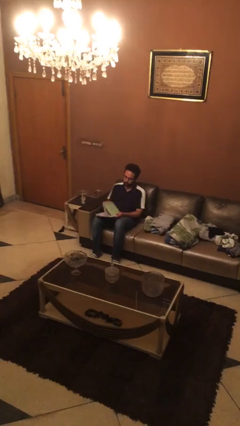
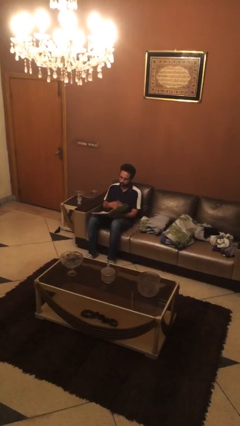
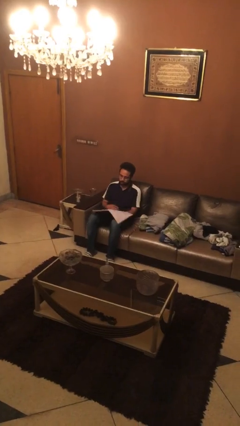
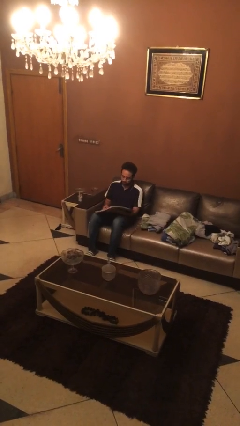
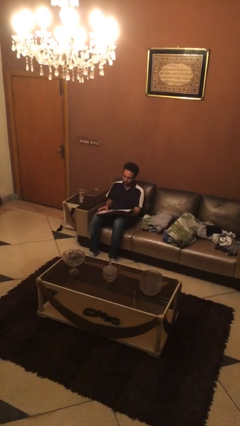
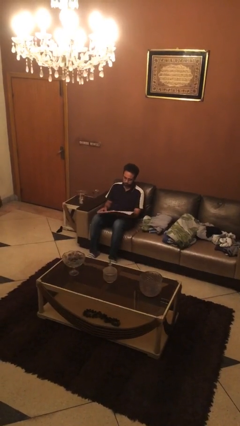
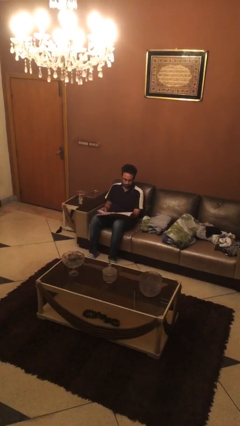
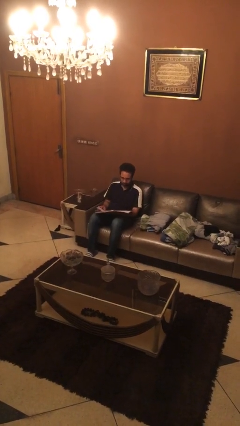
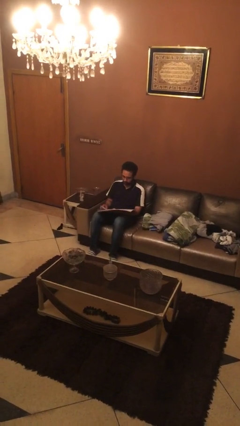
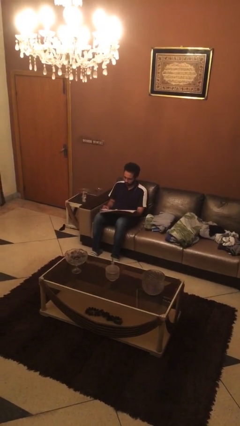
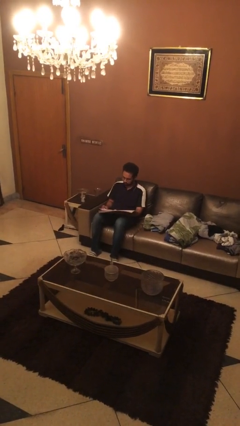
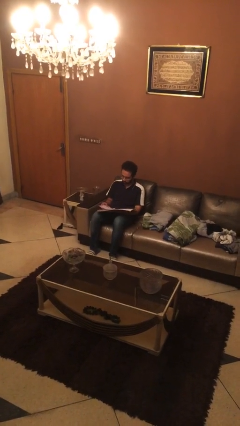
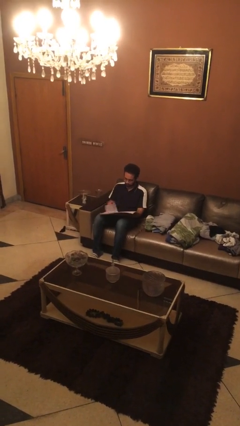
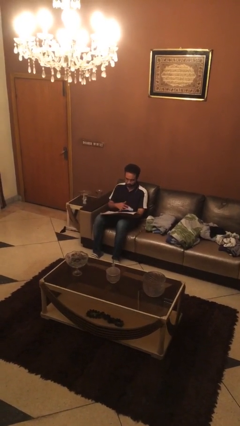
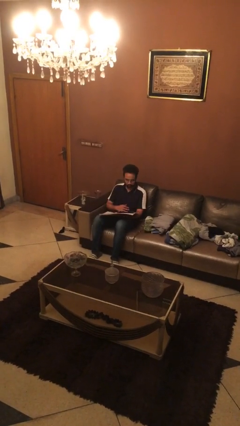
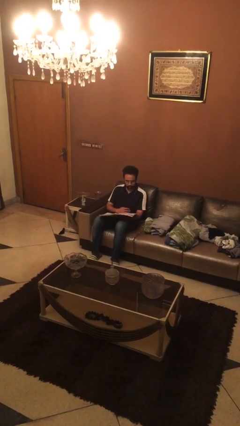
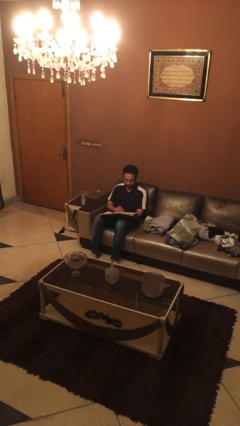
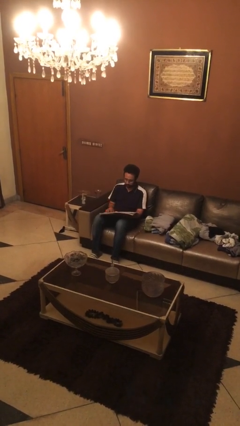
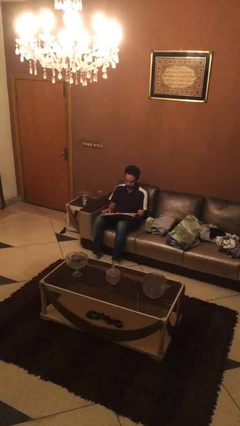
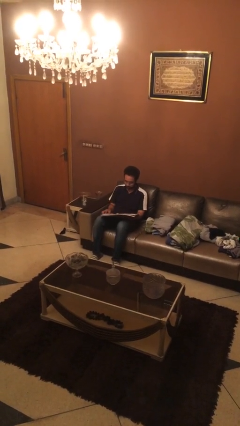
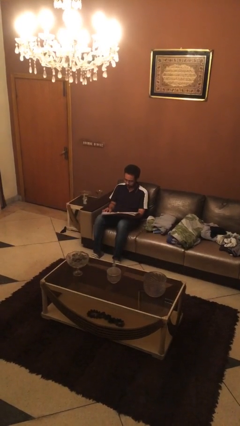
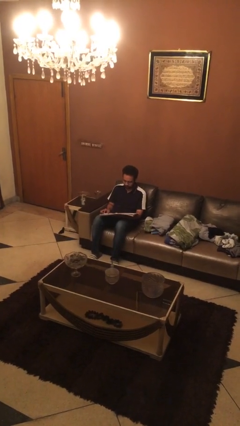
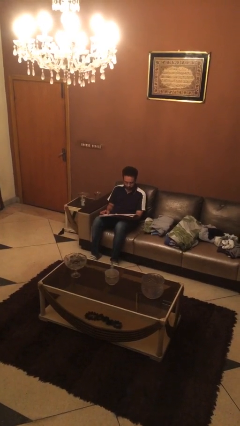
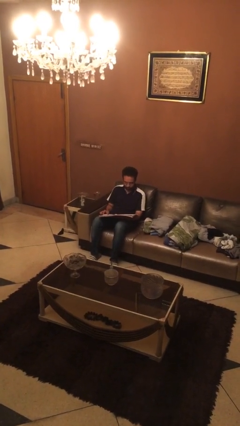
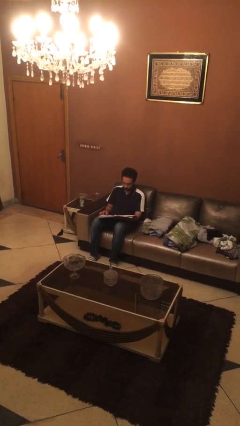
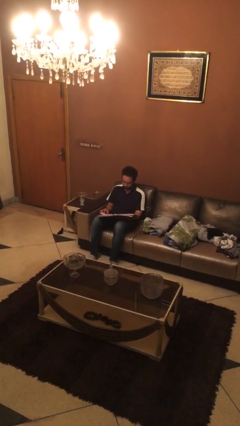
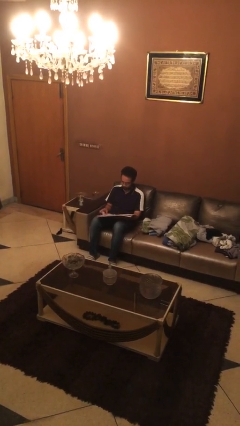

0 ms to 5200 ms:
person reads document

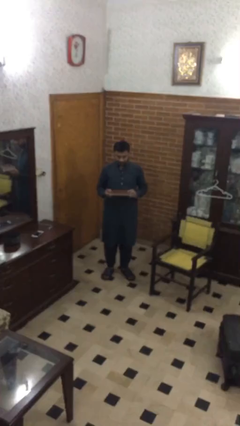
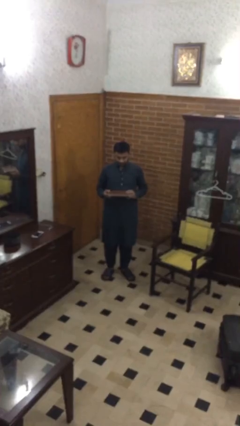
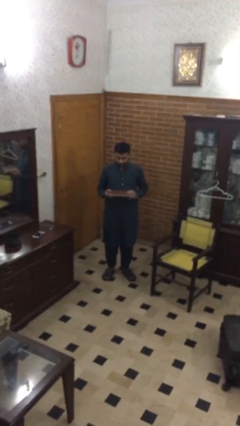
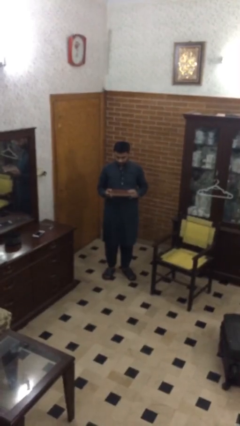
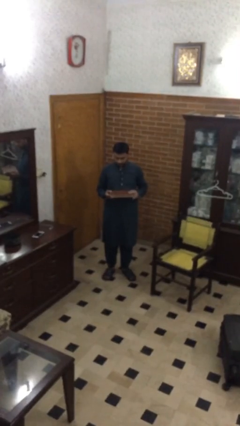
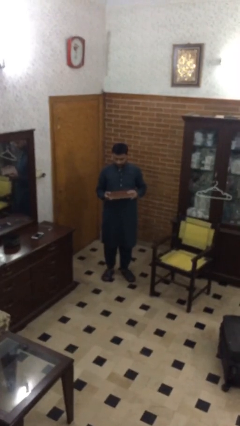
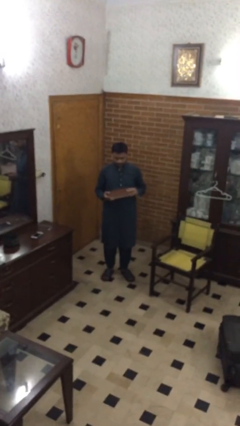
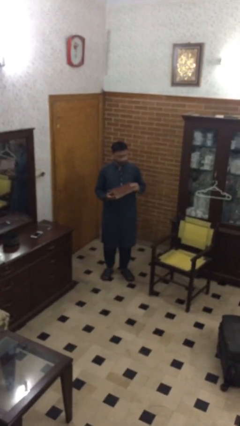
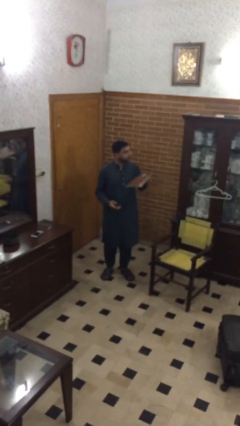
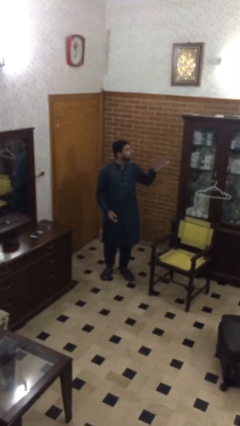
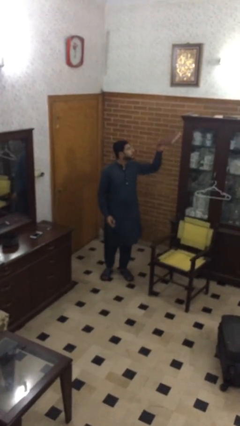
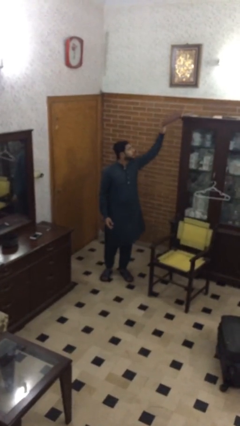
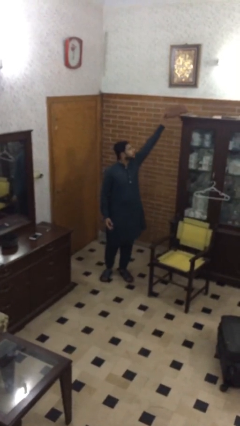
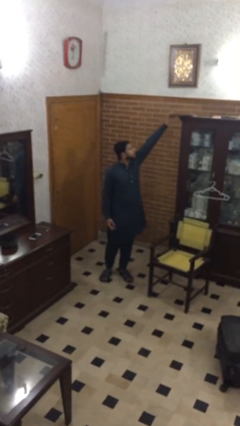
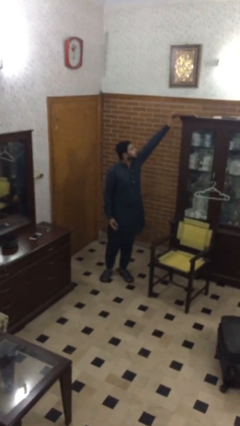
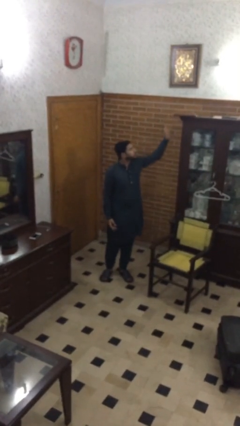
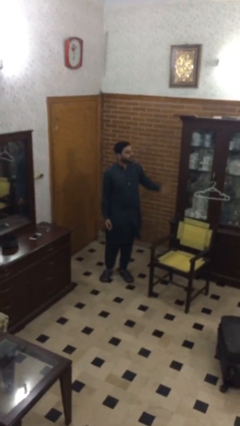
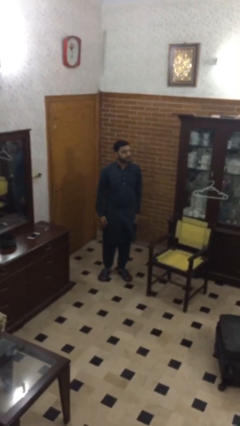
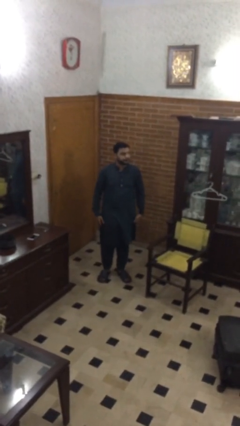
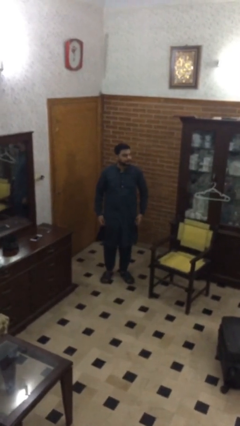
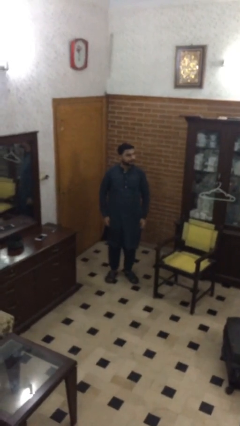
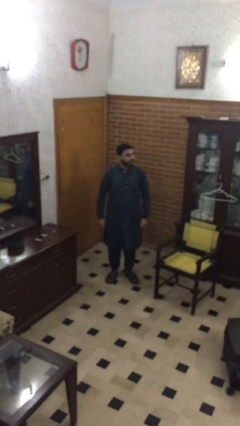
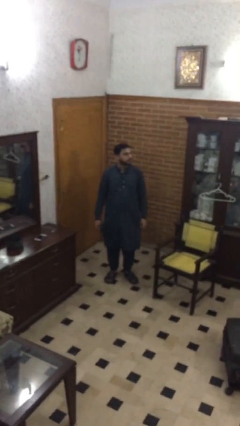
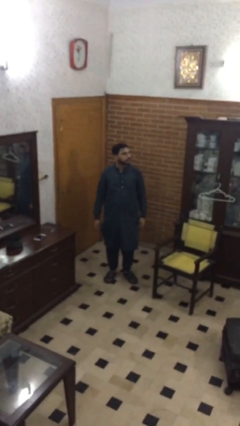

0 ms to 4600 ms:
person puts down object on shelf

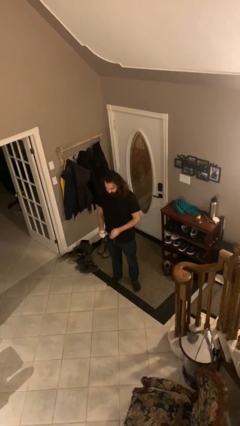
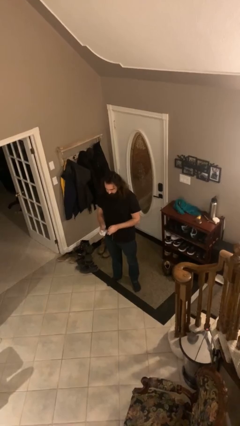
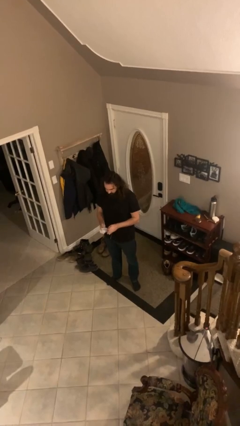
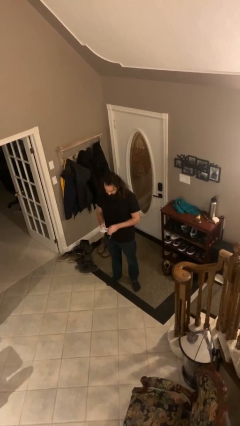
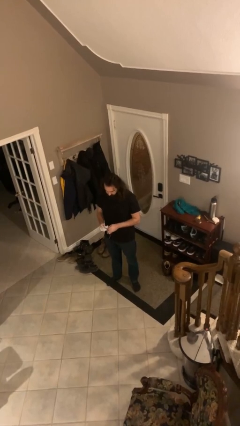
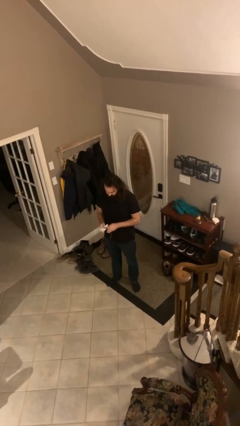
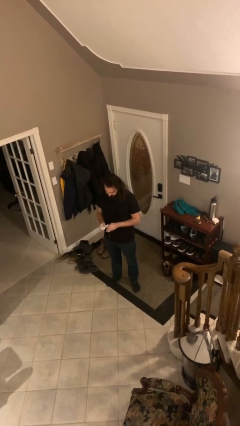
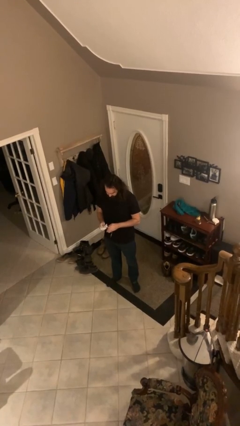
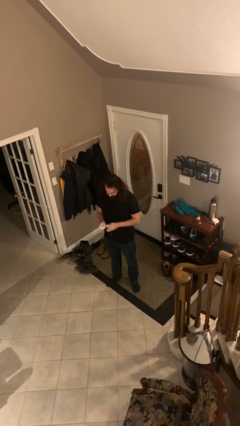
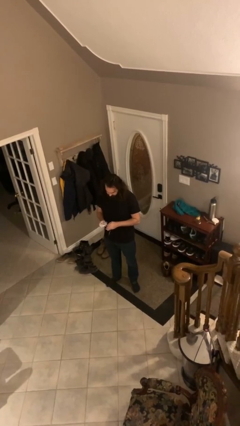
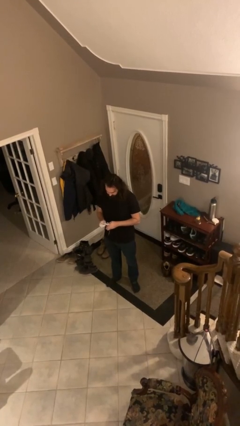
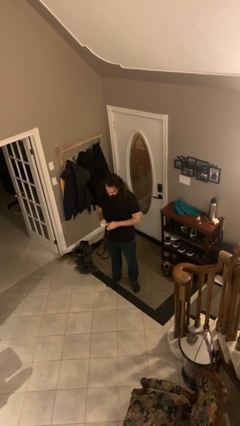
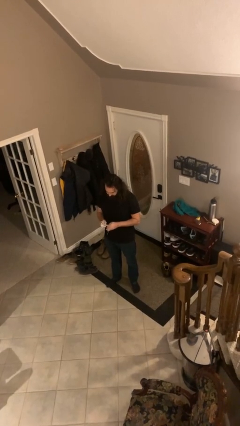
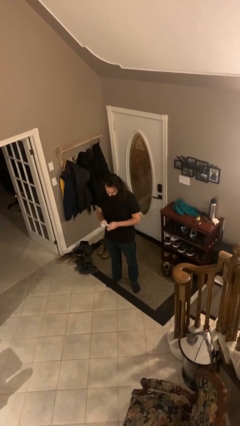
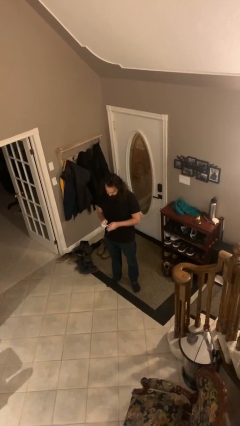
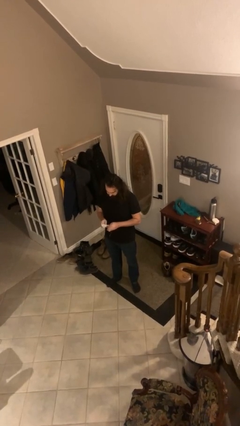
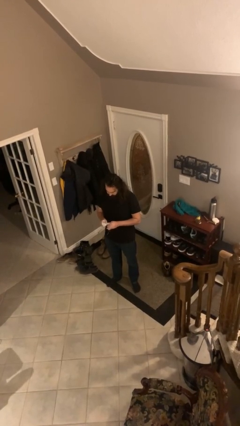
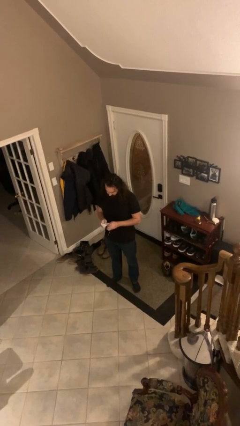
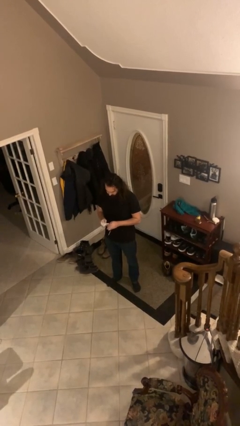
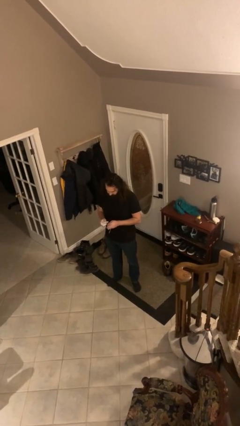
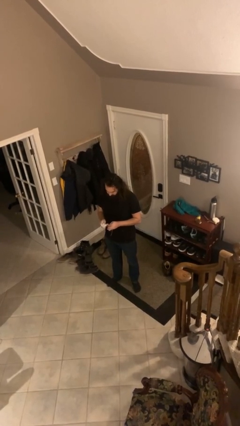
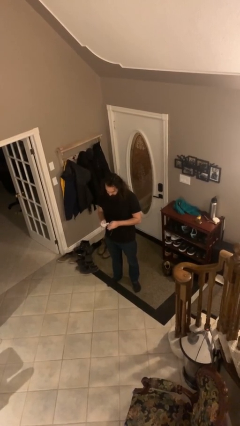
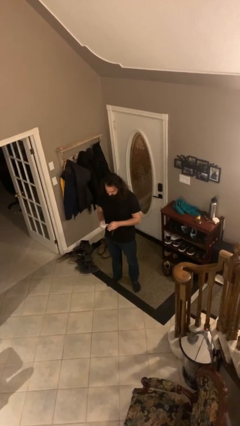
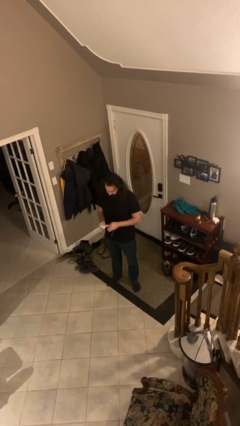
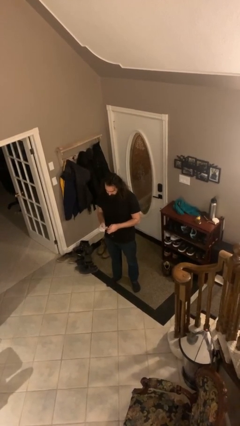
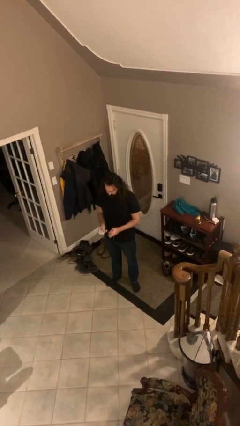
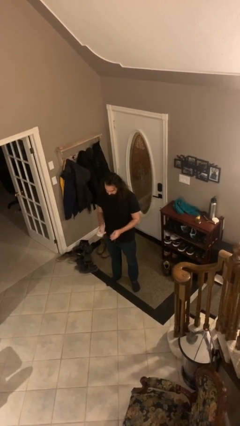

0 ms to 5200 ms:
person cleans eyeglasses

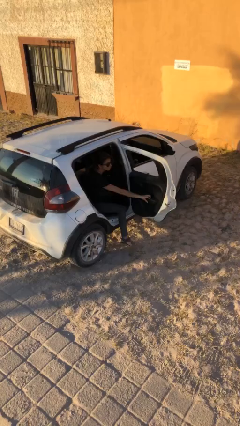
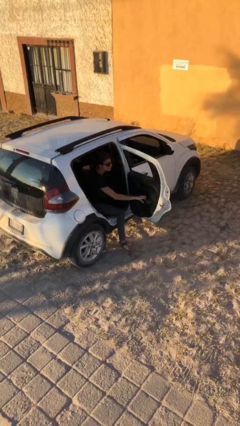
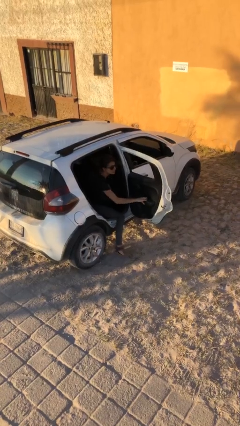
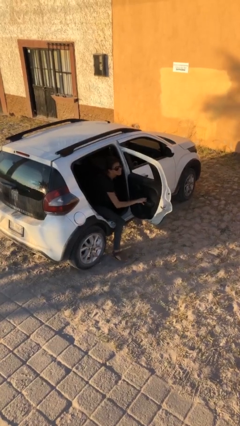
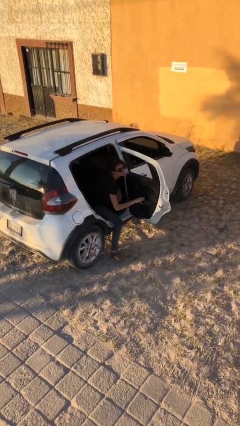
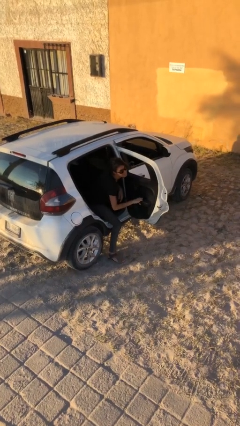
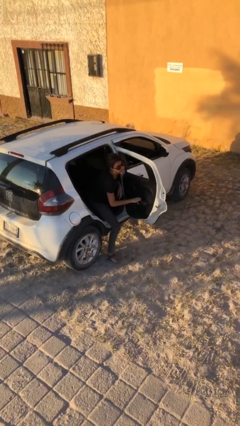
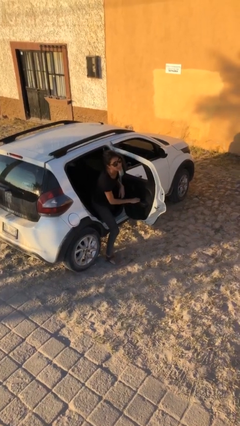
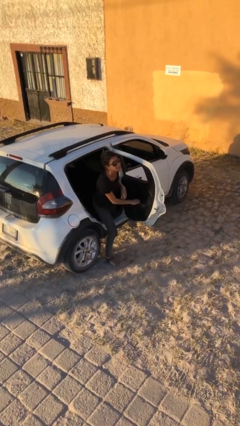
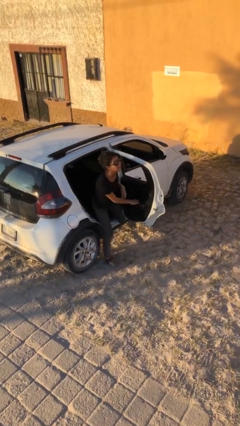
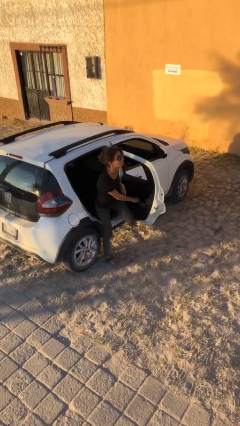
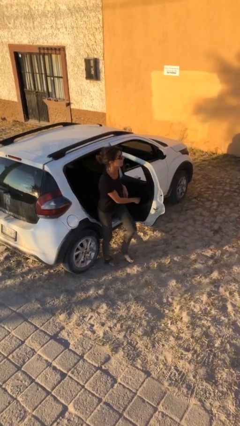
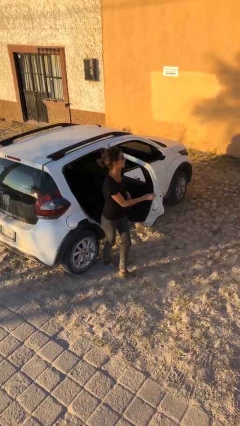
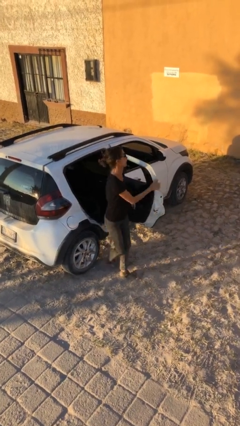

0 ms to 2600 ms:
person exits car
